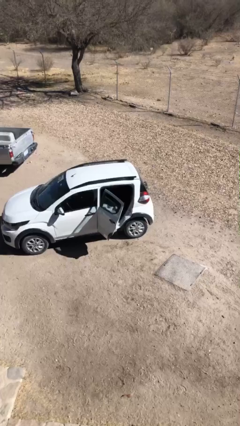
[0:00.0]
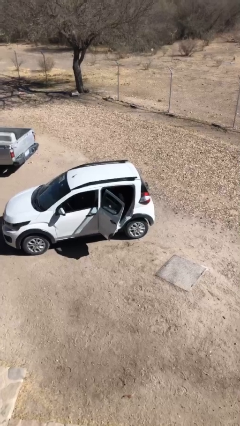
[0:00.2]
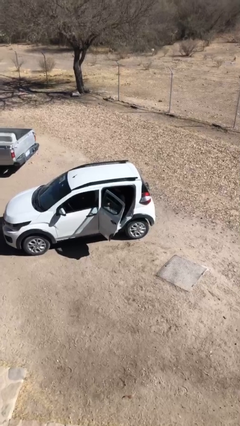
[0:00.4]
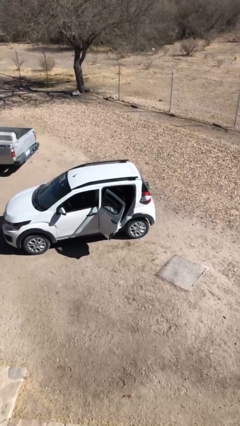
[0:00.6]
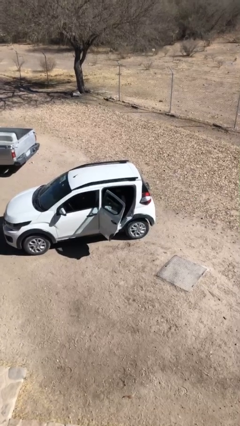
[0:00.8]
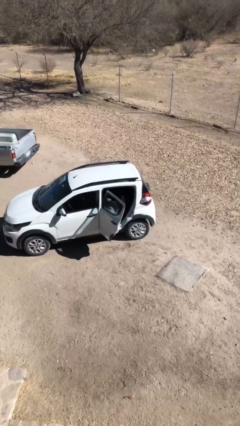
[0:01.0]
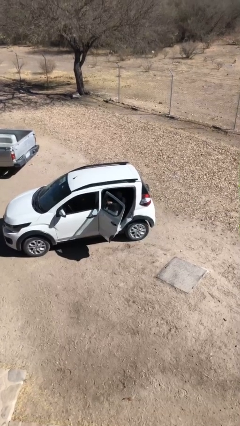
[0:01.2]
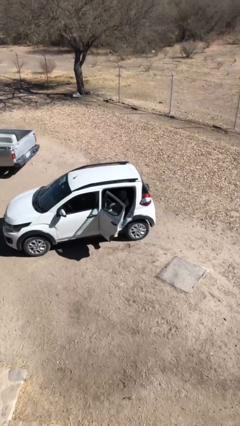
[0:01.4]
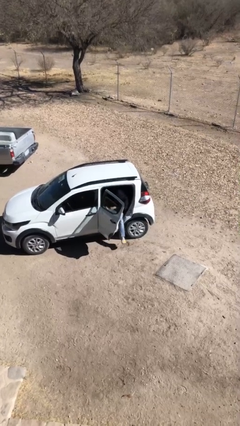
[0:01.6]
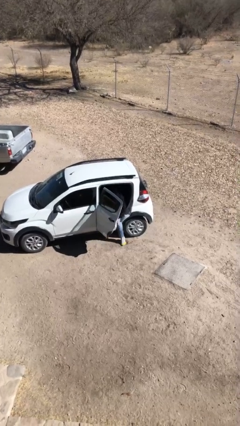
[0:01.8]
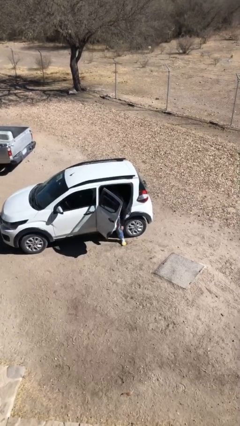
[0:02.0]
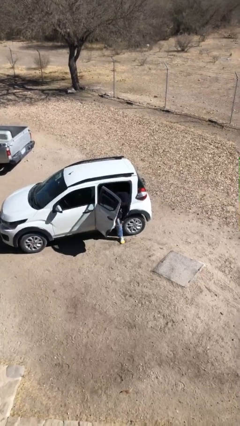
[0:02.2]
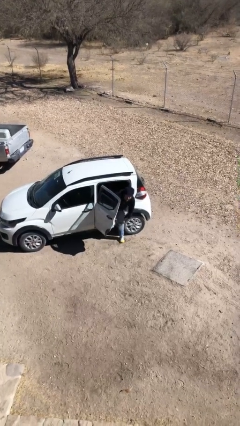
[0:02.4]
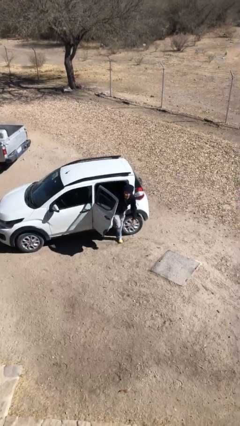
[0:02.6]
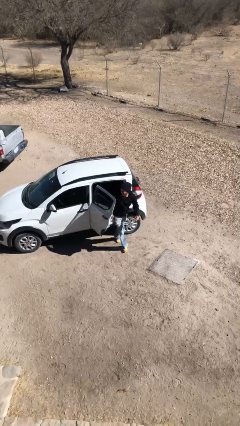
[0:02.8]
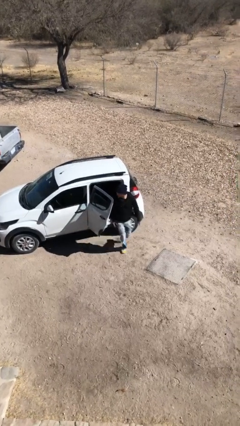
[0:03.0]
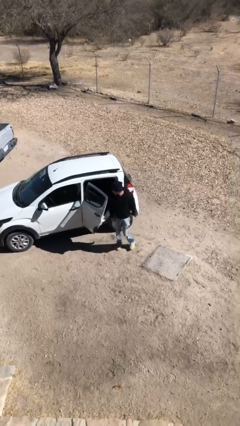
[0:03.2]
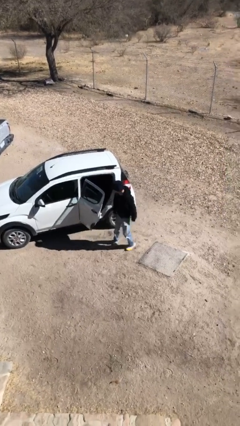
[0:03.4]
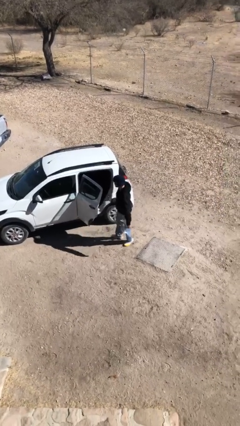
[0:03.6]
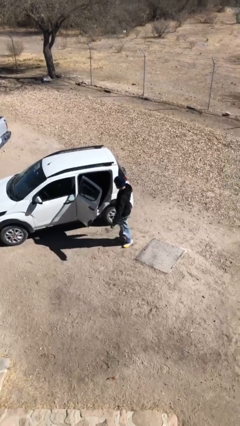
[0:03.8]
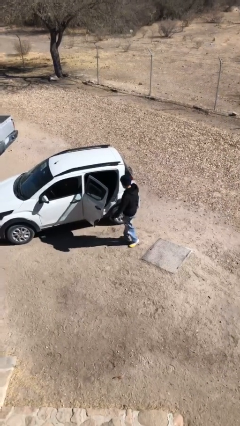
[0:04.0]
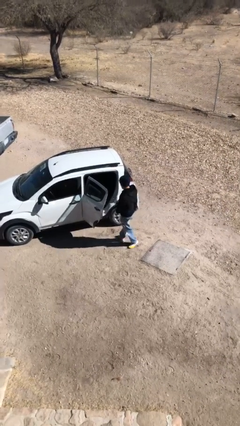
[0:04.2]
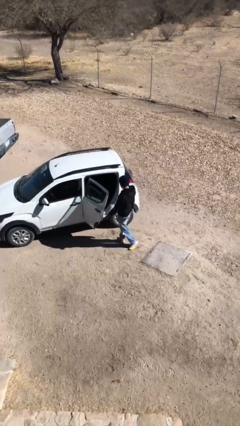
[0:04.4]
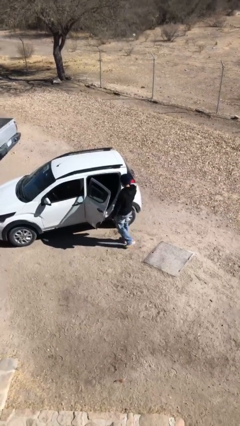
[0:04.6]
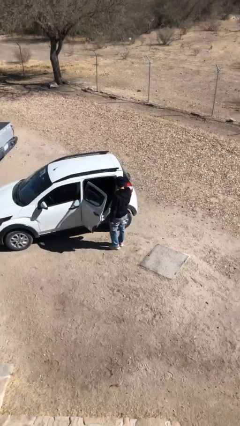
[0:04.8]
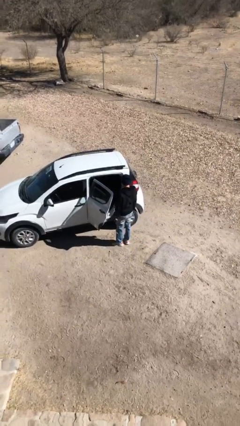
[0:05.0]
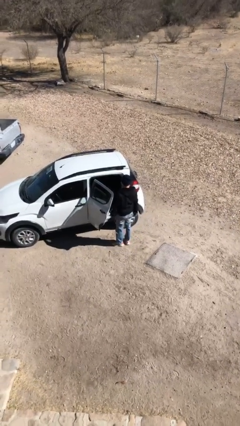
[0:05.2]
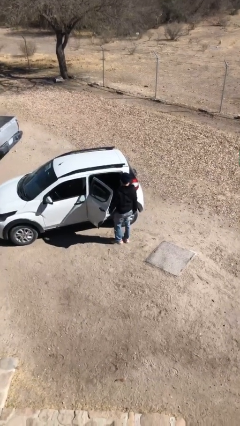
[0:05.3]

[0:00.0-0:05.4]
person exits car

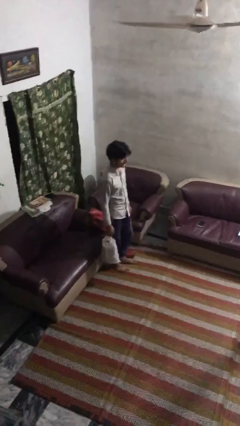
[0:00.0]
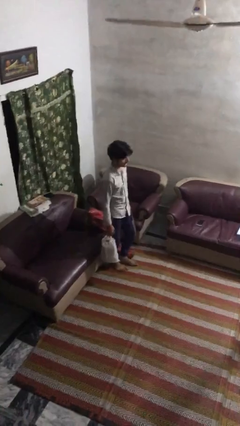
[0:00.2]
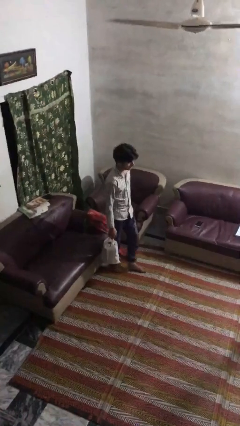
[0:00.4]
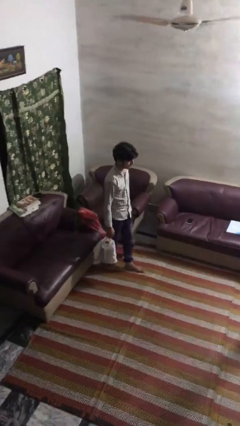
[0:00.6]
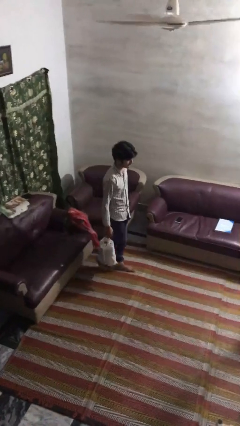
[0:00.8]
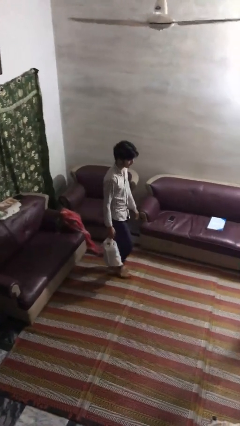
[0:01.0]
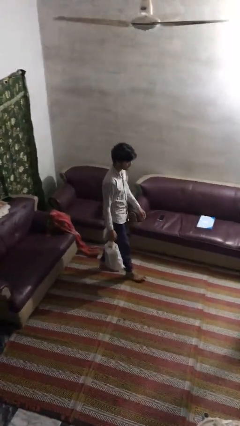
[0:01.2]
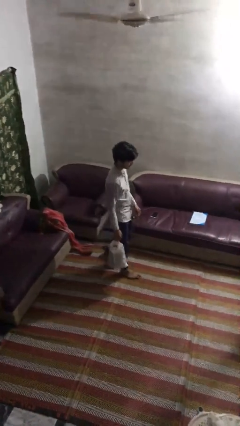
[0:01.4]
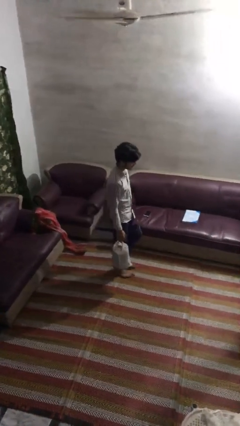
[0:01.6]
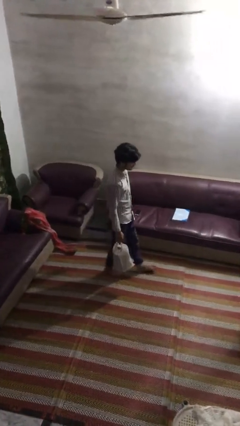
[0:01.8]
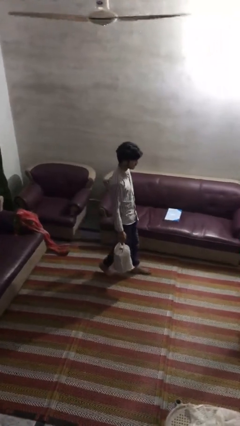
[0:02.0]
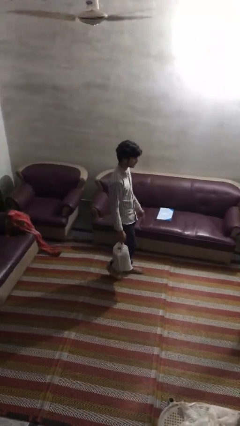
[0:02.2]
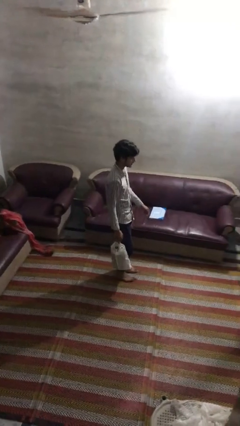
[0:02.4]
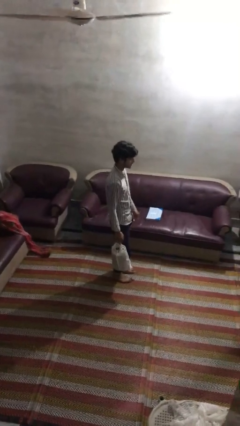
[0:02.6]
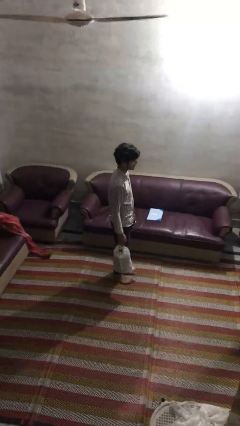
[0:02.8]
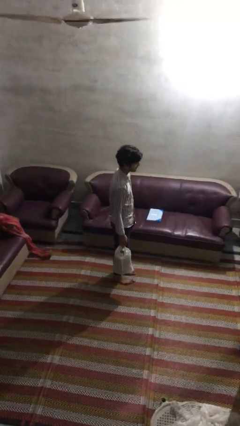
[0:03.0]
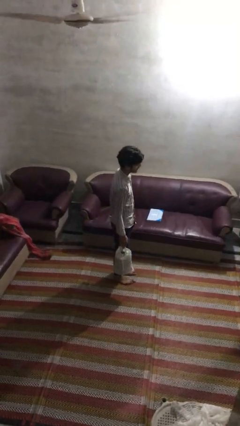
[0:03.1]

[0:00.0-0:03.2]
person carries groceries

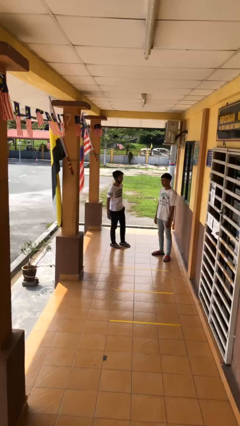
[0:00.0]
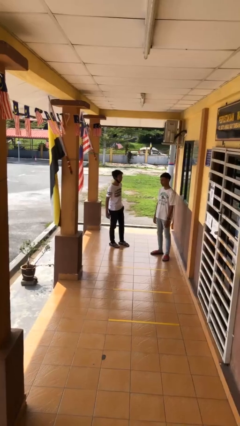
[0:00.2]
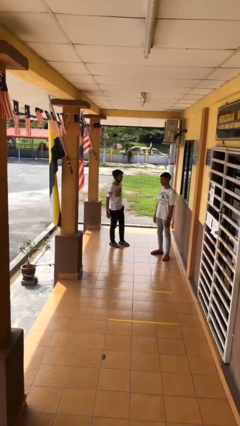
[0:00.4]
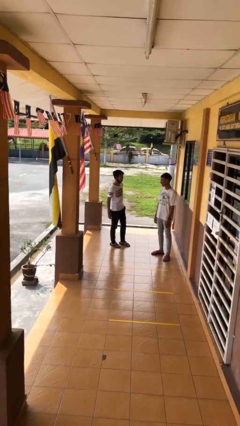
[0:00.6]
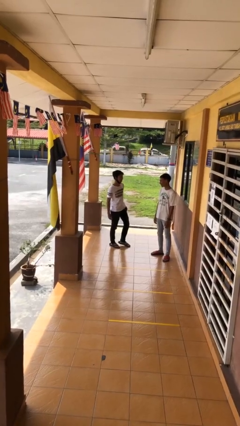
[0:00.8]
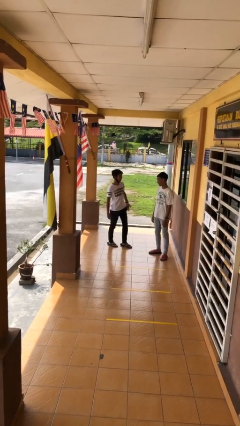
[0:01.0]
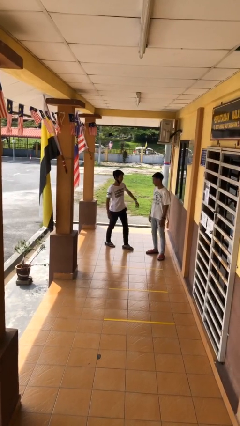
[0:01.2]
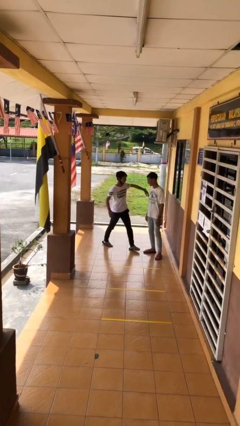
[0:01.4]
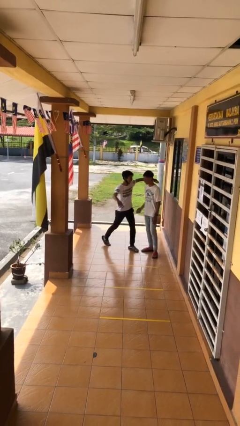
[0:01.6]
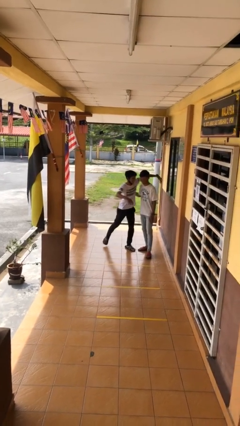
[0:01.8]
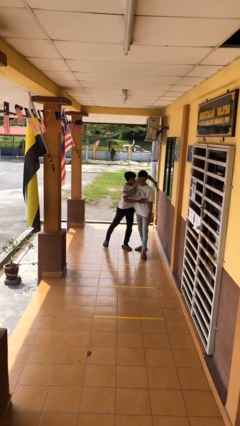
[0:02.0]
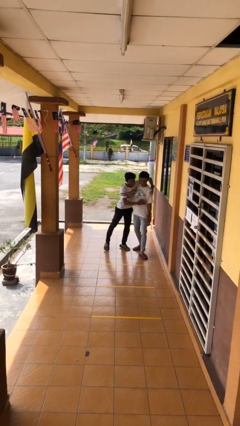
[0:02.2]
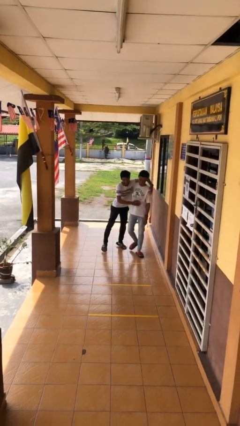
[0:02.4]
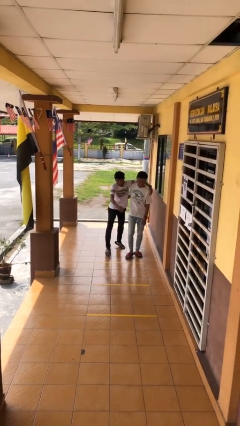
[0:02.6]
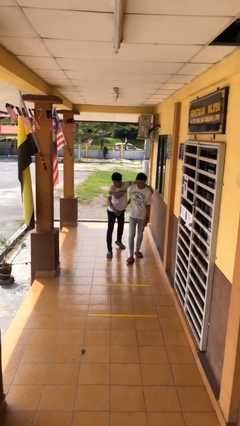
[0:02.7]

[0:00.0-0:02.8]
person embraces person

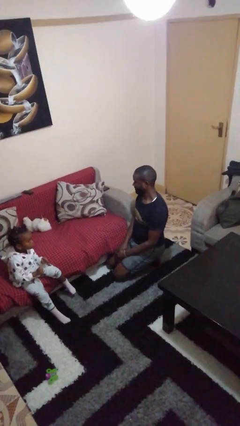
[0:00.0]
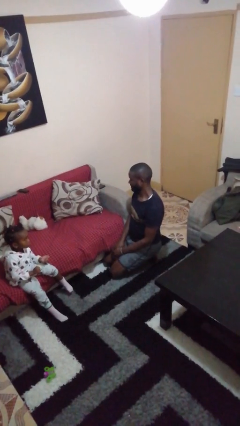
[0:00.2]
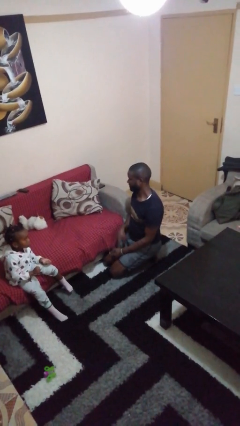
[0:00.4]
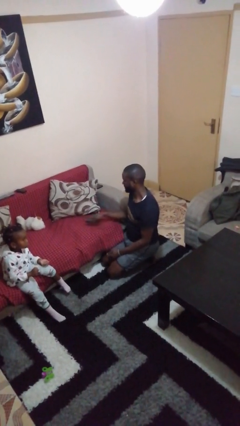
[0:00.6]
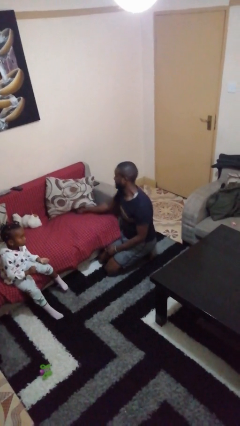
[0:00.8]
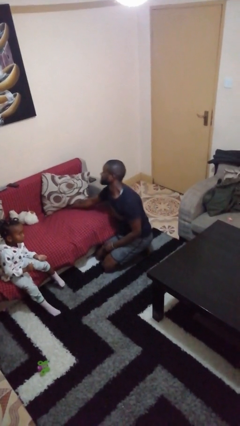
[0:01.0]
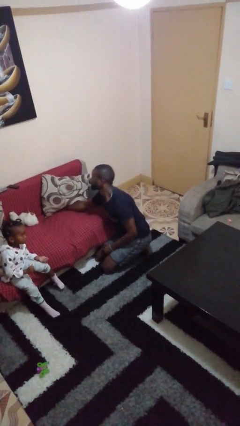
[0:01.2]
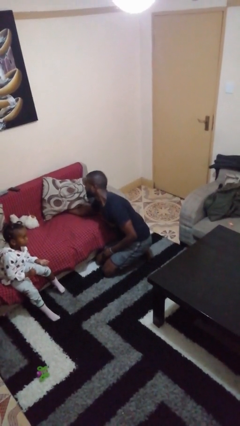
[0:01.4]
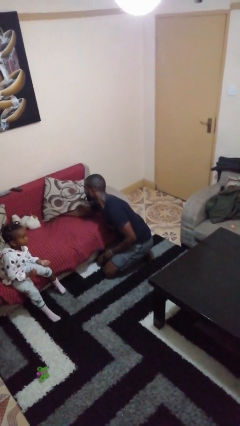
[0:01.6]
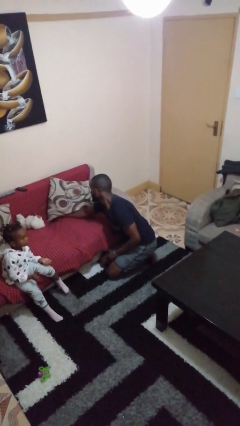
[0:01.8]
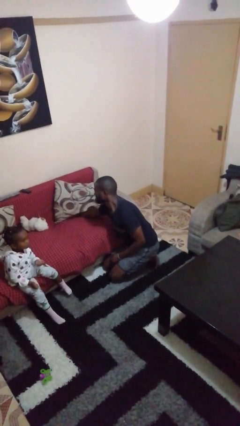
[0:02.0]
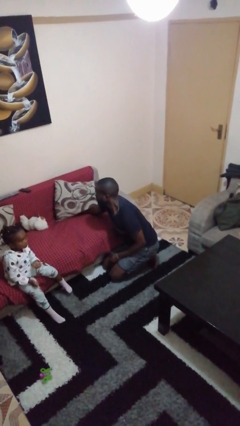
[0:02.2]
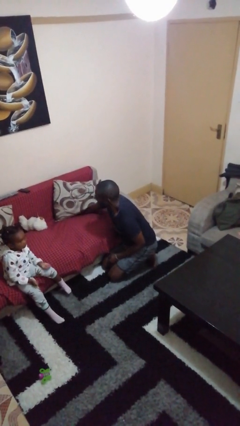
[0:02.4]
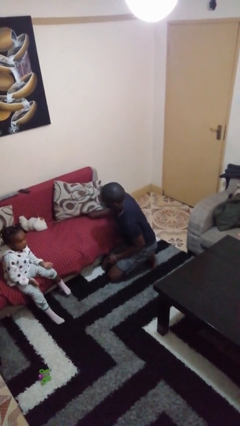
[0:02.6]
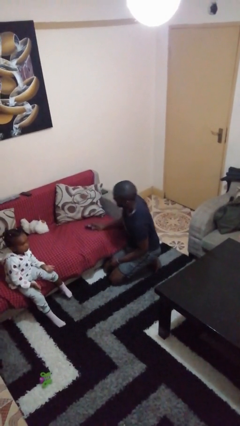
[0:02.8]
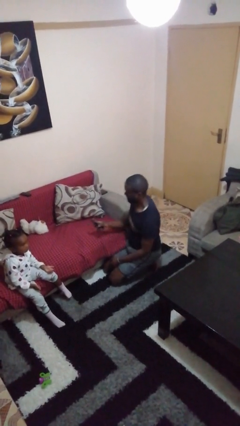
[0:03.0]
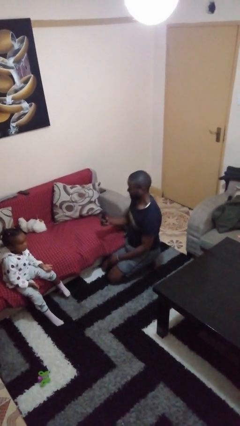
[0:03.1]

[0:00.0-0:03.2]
person searches in couch

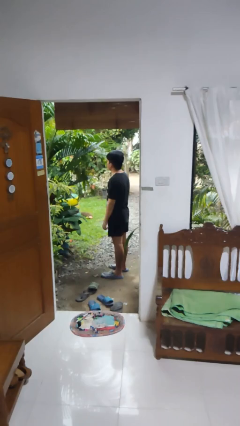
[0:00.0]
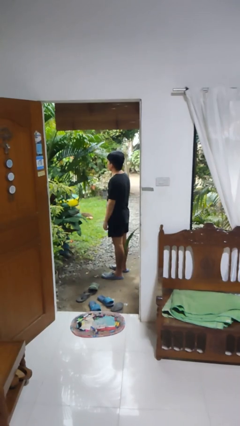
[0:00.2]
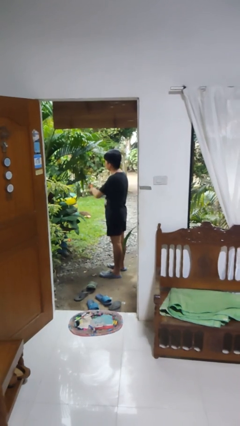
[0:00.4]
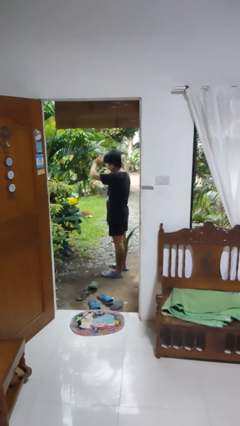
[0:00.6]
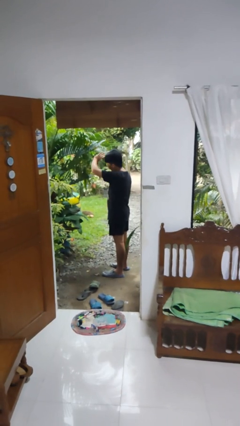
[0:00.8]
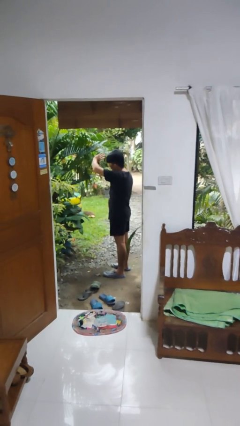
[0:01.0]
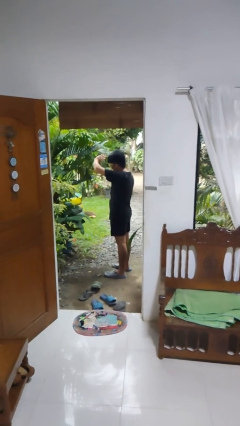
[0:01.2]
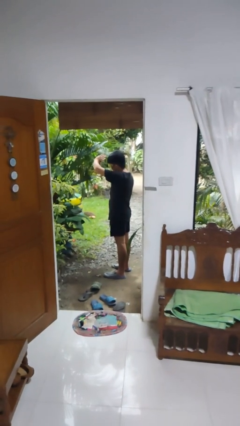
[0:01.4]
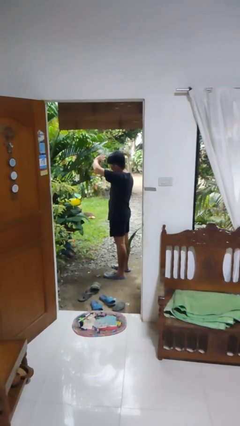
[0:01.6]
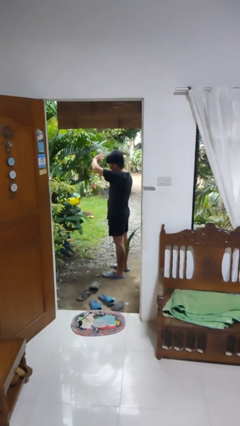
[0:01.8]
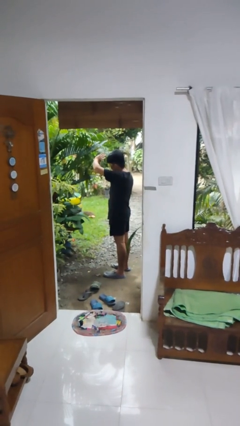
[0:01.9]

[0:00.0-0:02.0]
person shades eyes

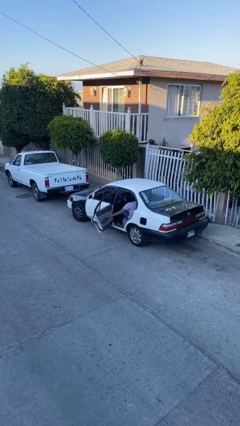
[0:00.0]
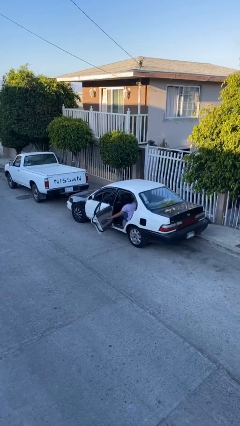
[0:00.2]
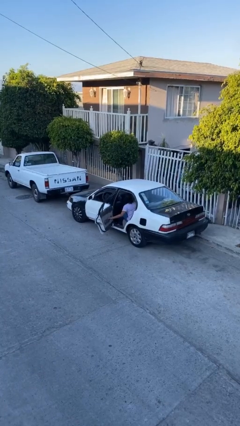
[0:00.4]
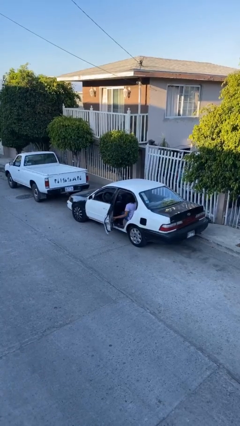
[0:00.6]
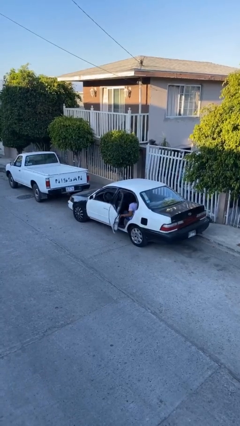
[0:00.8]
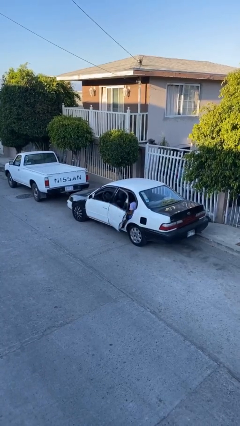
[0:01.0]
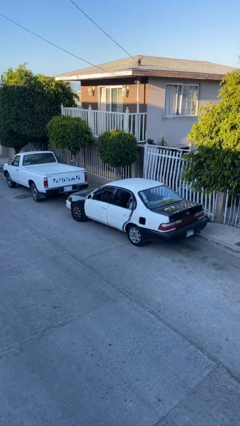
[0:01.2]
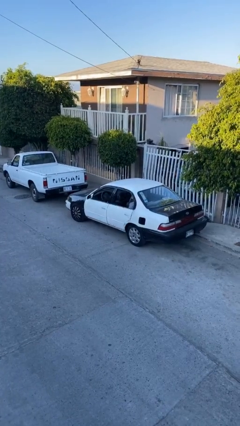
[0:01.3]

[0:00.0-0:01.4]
person closes car door
